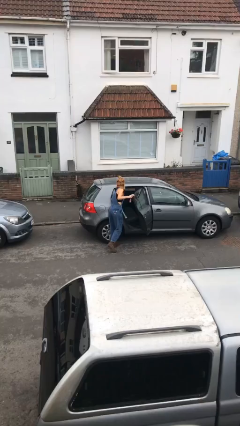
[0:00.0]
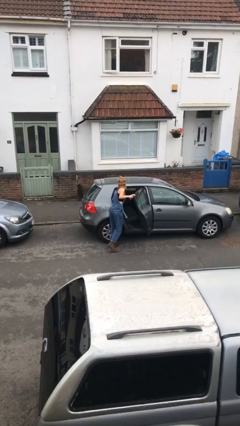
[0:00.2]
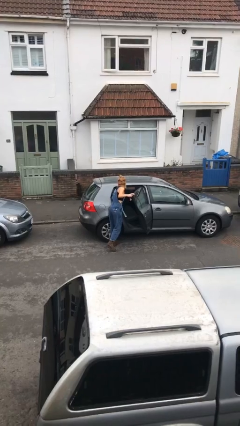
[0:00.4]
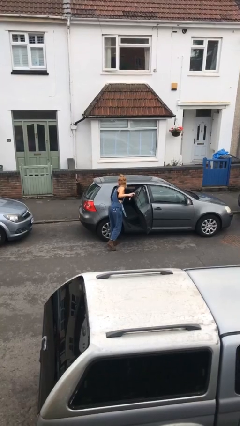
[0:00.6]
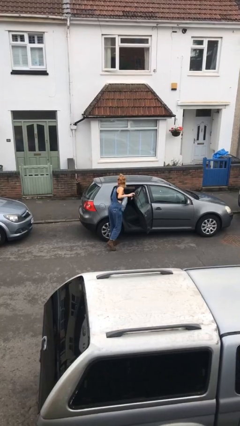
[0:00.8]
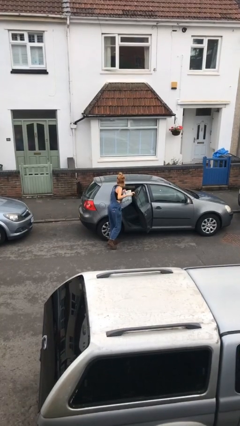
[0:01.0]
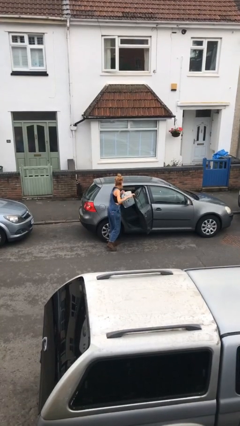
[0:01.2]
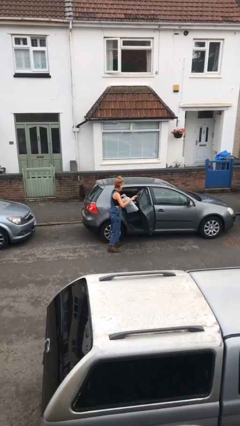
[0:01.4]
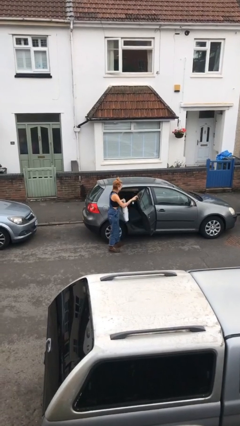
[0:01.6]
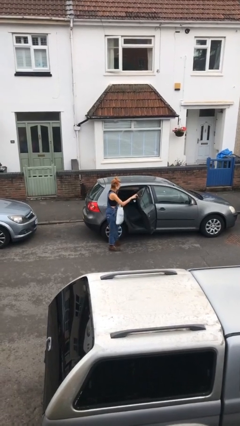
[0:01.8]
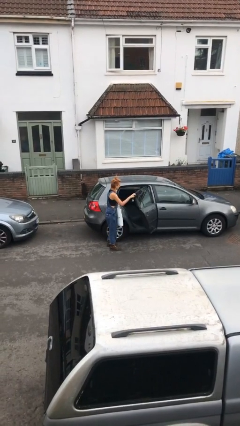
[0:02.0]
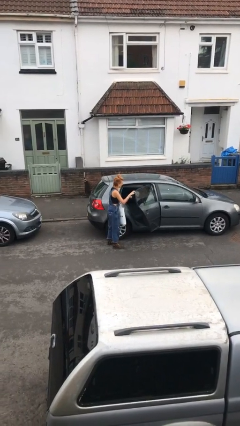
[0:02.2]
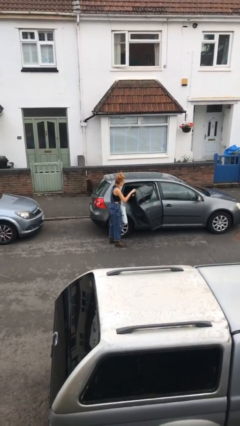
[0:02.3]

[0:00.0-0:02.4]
person unloads car

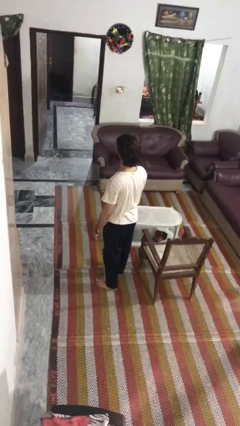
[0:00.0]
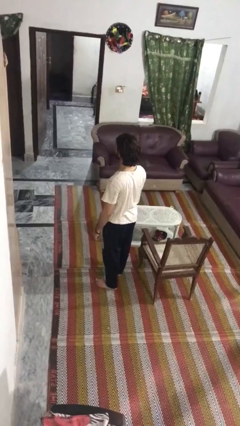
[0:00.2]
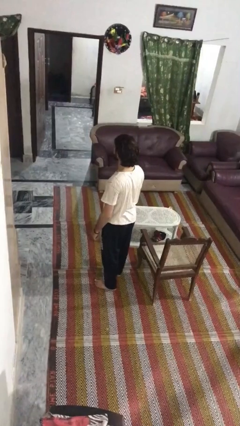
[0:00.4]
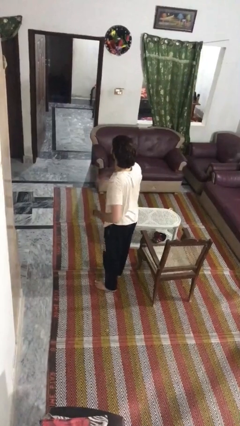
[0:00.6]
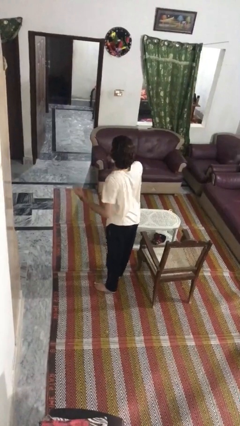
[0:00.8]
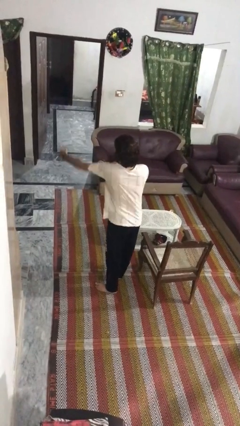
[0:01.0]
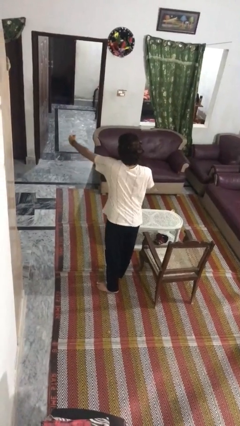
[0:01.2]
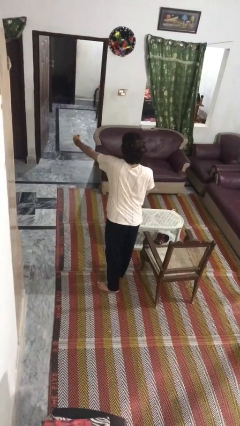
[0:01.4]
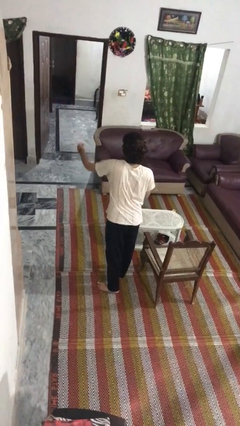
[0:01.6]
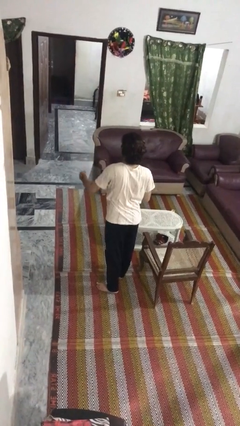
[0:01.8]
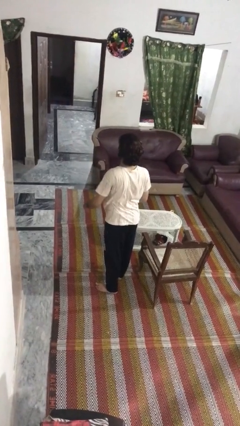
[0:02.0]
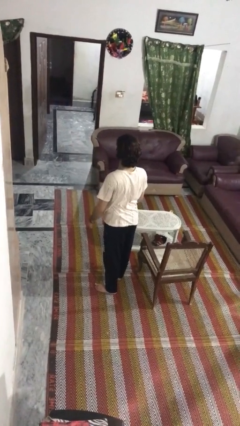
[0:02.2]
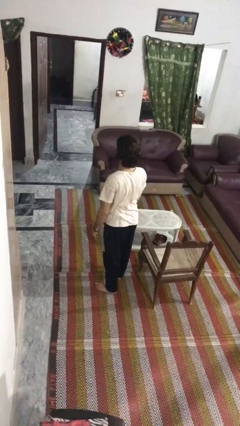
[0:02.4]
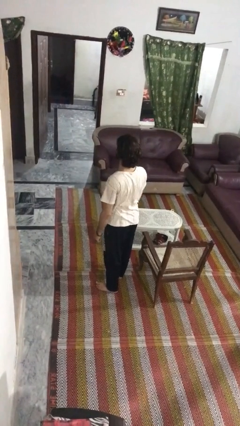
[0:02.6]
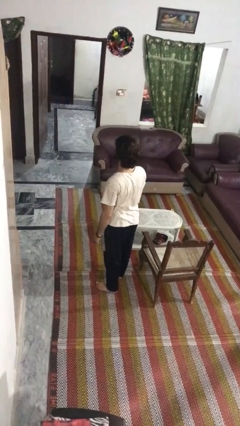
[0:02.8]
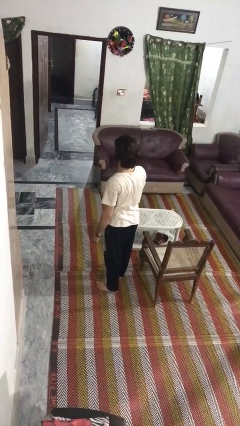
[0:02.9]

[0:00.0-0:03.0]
person punches

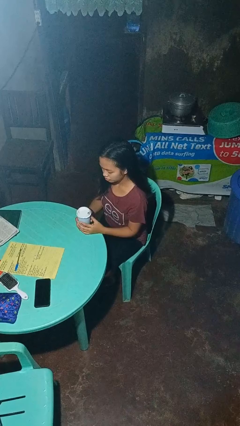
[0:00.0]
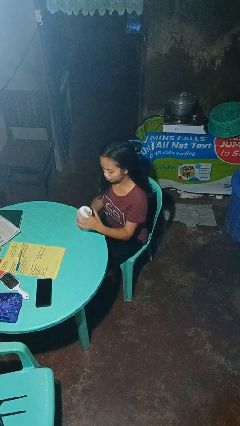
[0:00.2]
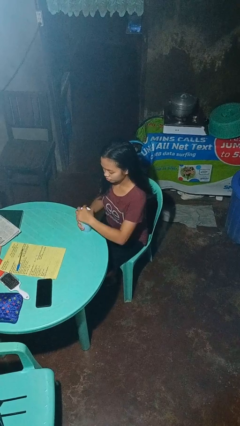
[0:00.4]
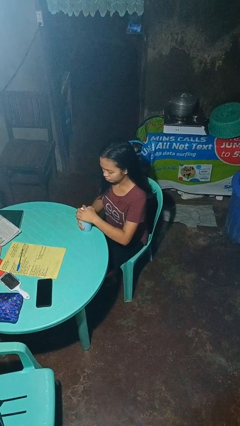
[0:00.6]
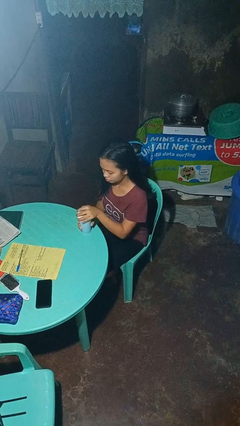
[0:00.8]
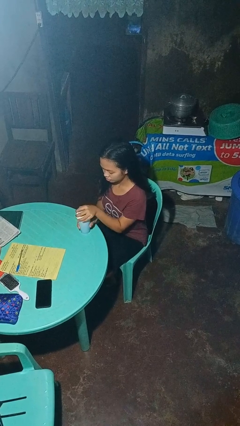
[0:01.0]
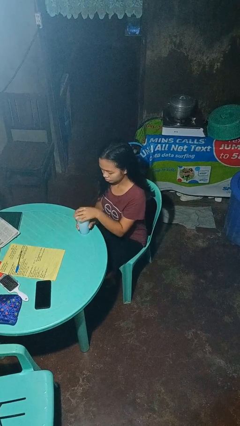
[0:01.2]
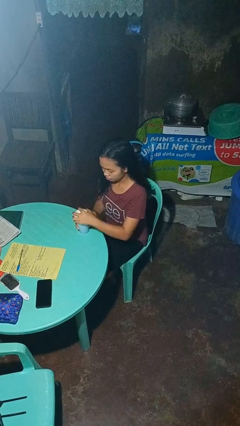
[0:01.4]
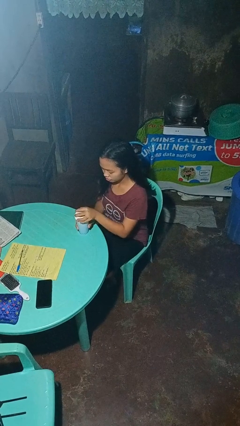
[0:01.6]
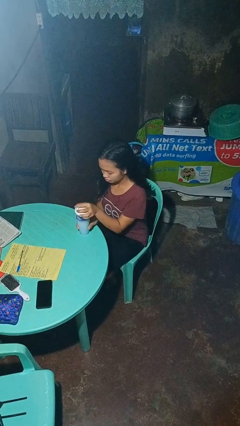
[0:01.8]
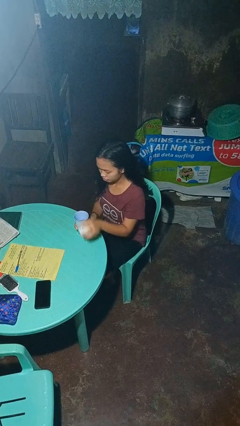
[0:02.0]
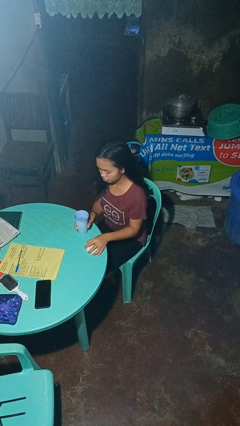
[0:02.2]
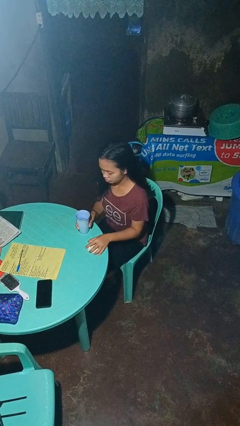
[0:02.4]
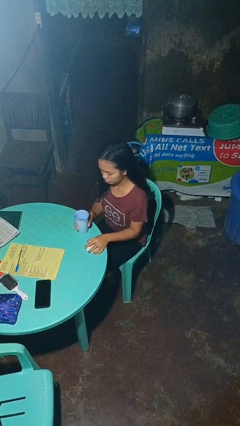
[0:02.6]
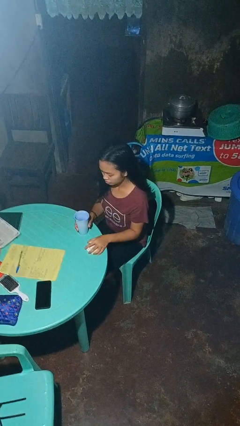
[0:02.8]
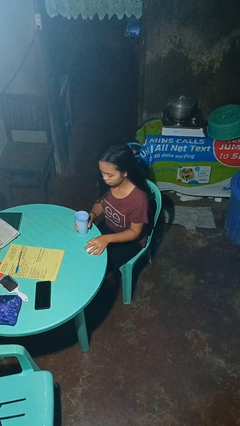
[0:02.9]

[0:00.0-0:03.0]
person unscrews lid from bottle

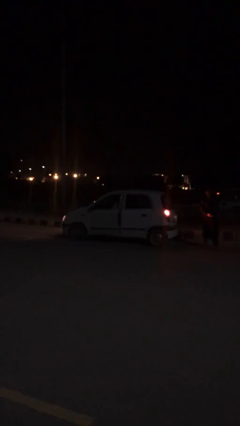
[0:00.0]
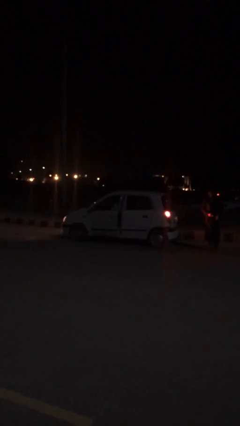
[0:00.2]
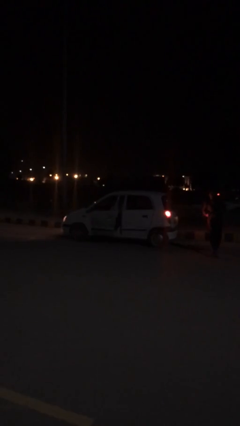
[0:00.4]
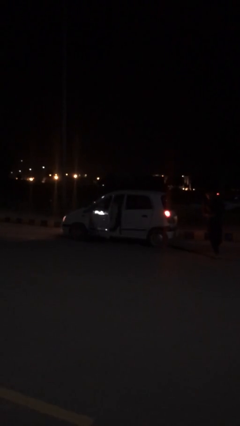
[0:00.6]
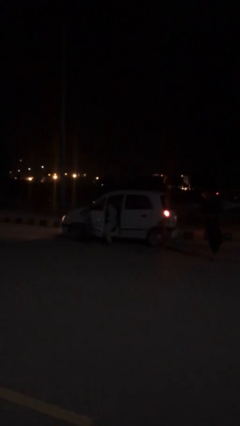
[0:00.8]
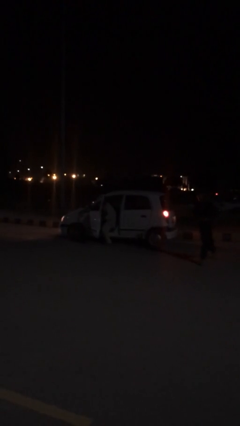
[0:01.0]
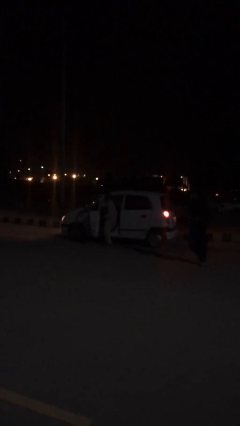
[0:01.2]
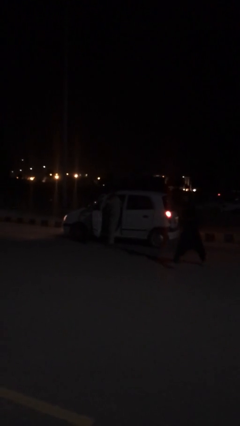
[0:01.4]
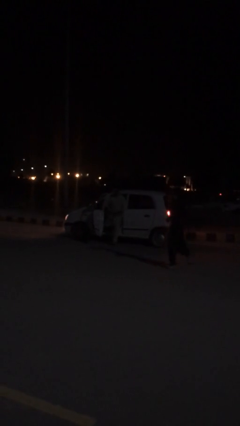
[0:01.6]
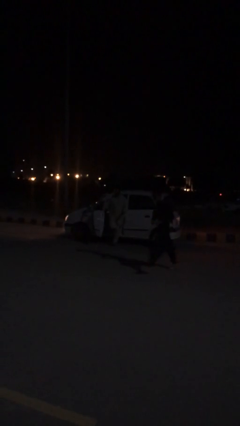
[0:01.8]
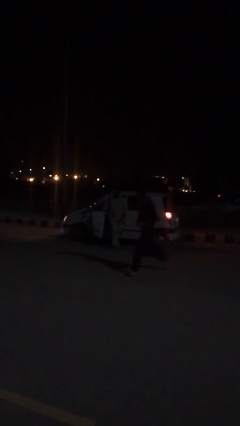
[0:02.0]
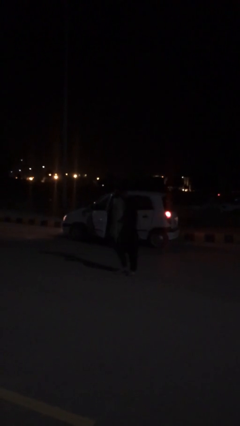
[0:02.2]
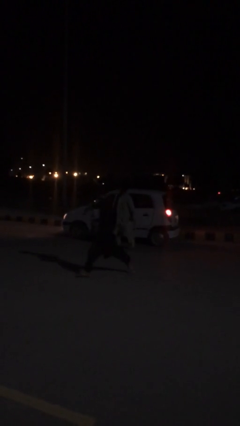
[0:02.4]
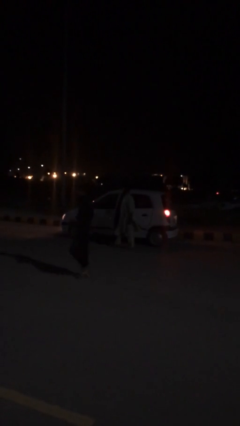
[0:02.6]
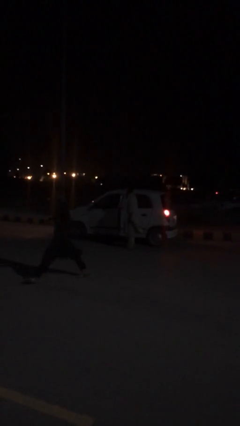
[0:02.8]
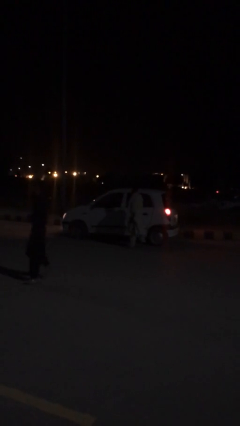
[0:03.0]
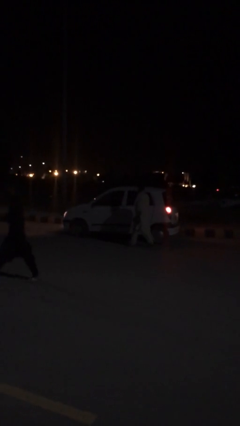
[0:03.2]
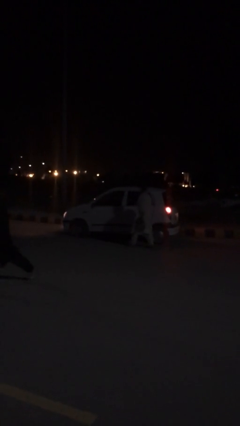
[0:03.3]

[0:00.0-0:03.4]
car drops off person

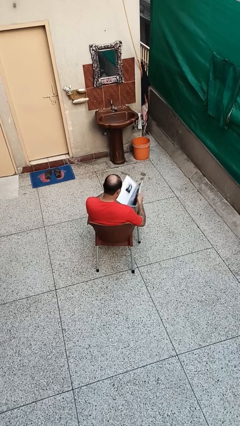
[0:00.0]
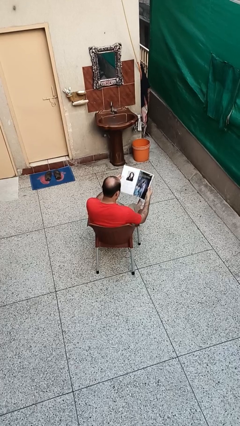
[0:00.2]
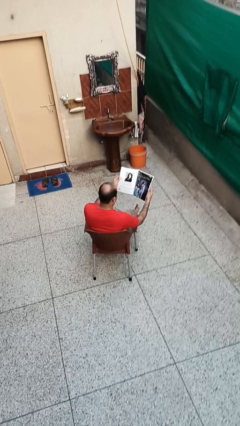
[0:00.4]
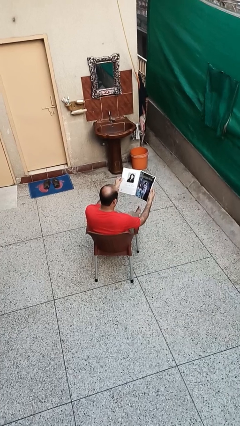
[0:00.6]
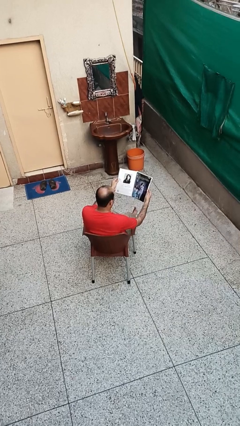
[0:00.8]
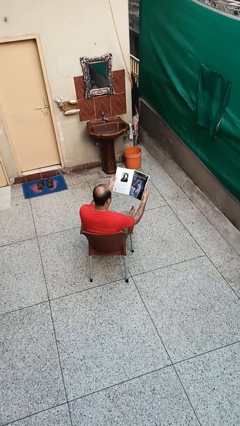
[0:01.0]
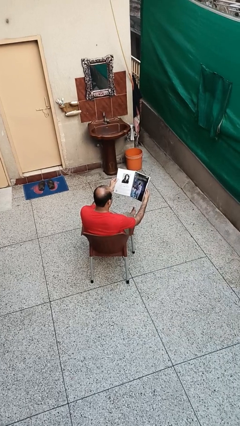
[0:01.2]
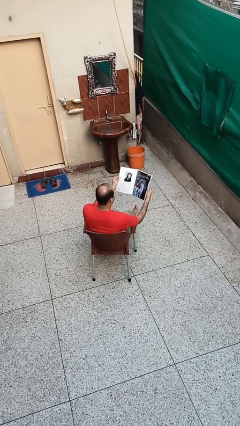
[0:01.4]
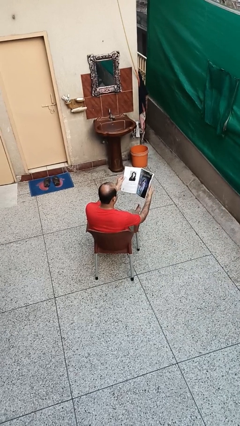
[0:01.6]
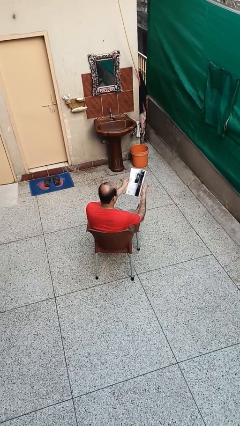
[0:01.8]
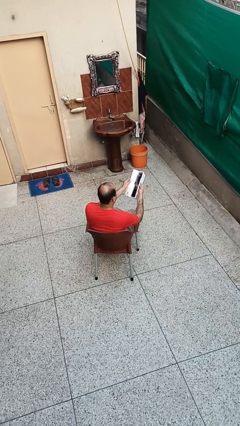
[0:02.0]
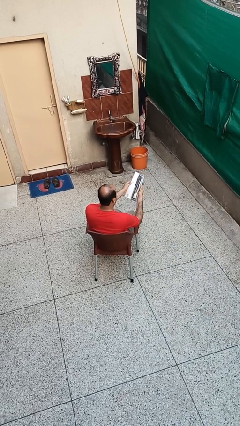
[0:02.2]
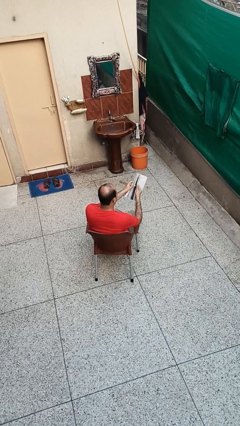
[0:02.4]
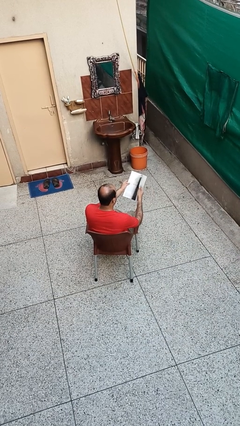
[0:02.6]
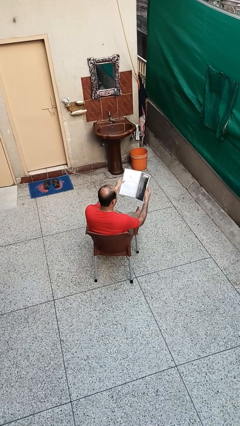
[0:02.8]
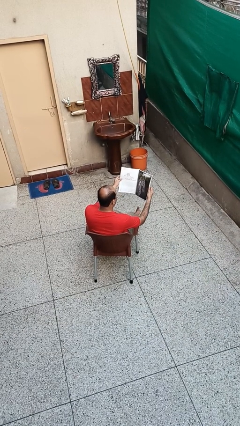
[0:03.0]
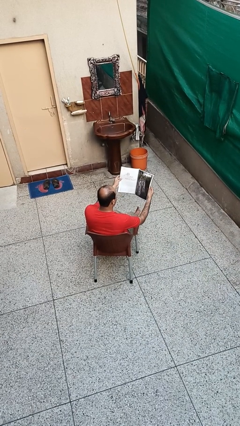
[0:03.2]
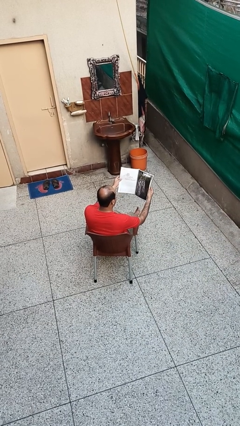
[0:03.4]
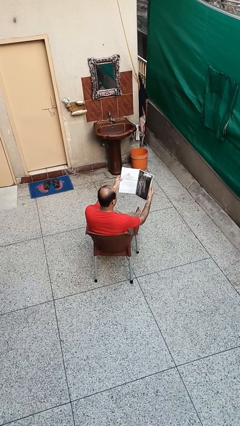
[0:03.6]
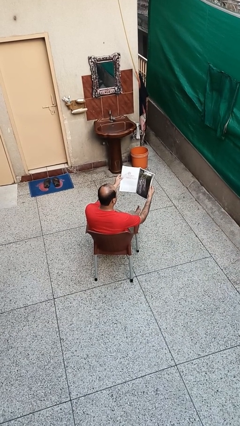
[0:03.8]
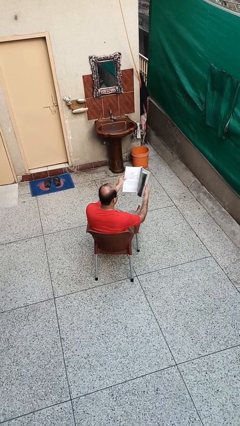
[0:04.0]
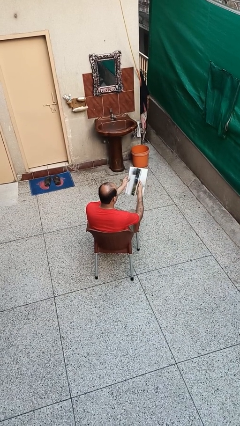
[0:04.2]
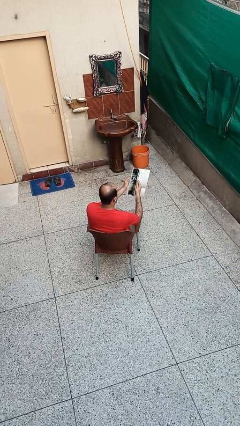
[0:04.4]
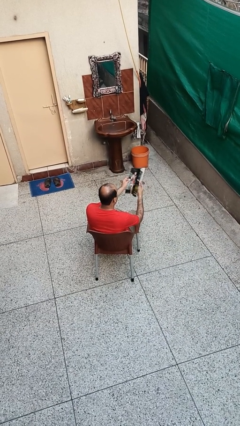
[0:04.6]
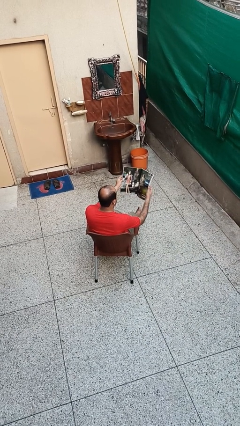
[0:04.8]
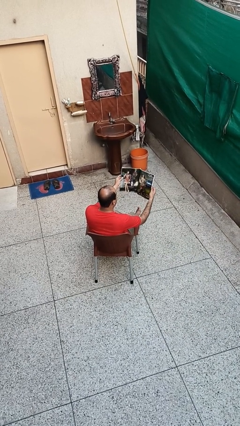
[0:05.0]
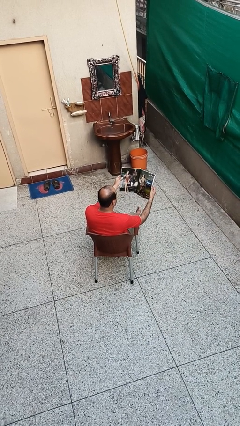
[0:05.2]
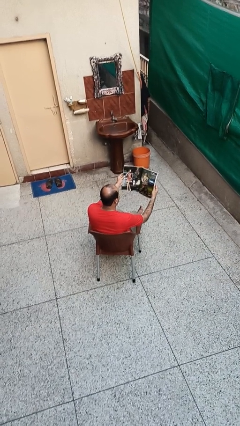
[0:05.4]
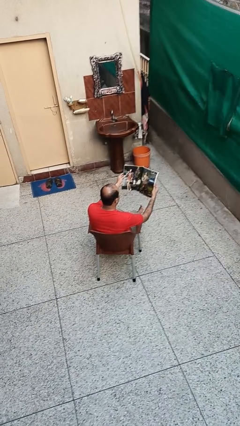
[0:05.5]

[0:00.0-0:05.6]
person reads magazine

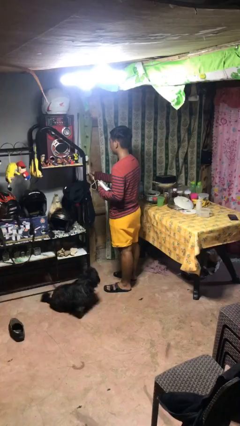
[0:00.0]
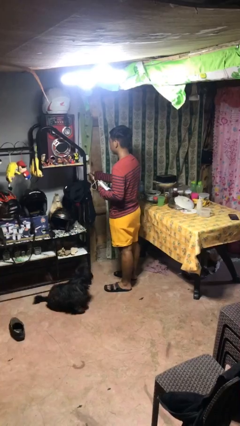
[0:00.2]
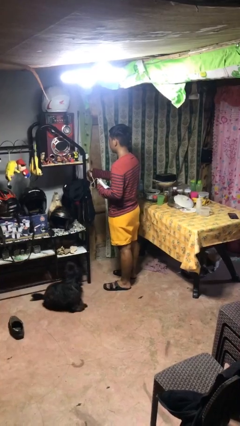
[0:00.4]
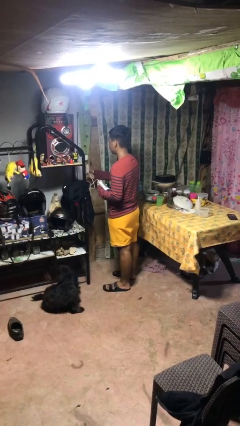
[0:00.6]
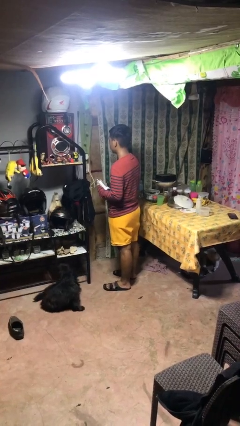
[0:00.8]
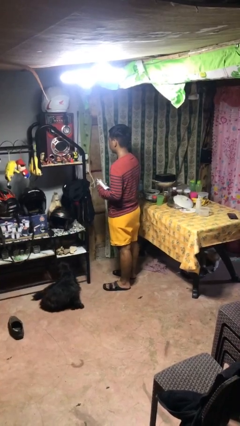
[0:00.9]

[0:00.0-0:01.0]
person plugs into electrical socket
